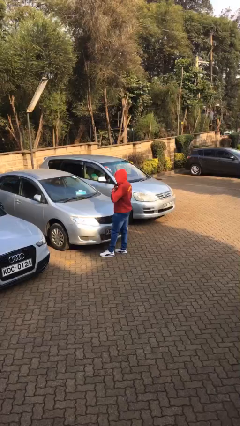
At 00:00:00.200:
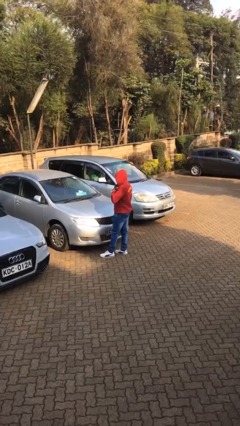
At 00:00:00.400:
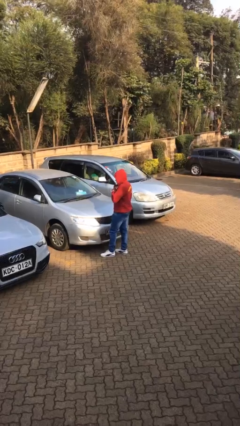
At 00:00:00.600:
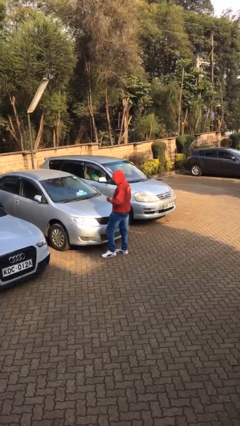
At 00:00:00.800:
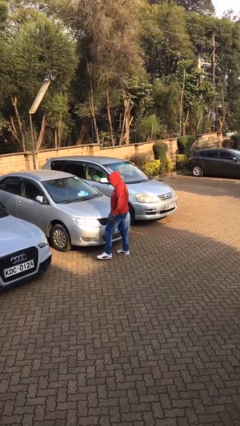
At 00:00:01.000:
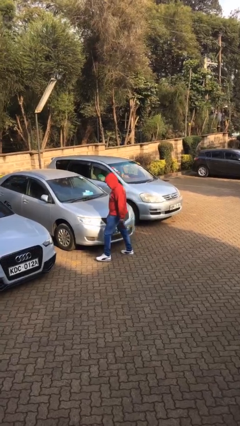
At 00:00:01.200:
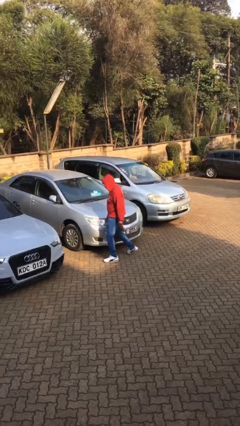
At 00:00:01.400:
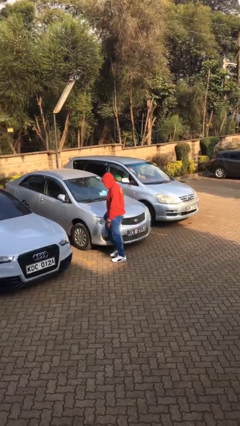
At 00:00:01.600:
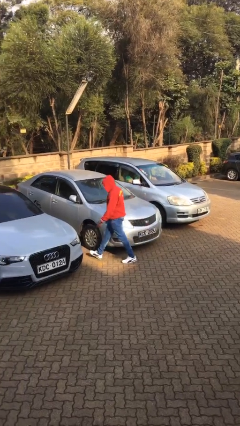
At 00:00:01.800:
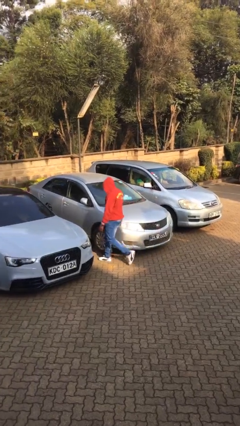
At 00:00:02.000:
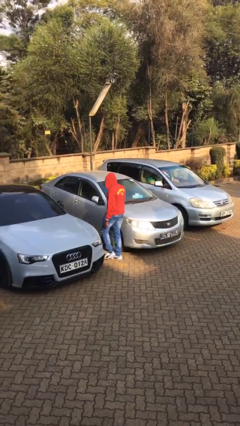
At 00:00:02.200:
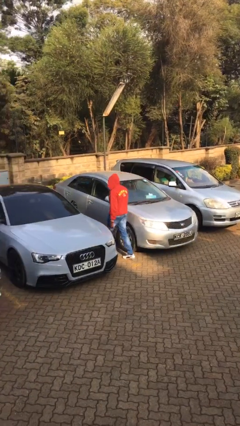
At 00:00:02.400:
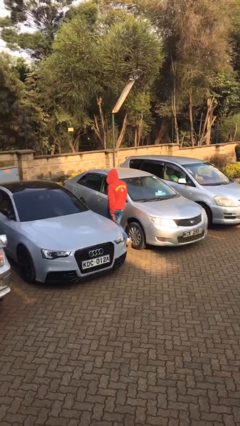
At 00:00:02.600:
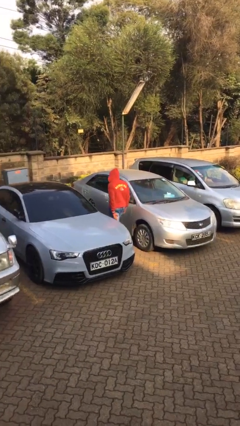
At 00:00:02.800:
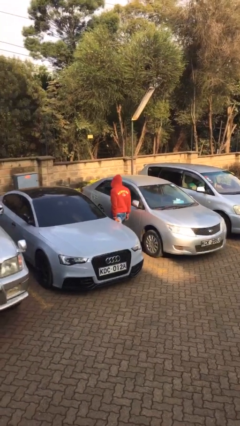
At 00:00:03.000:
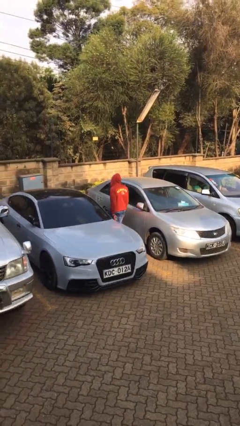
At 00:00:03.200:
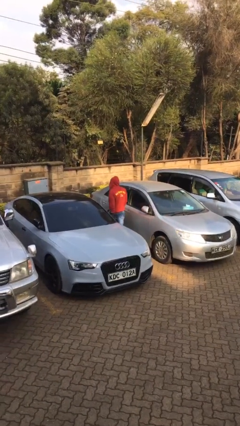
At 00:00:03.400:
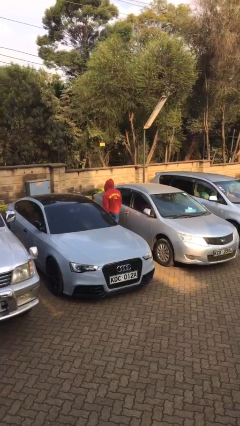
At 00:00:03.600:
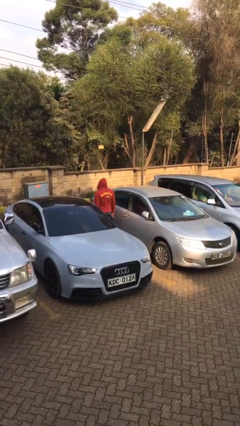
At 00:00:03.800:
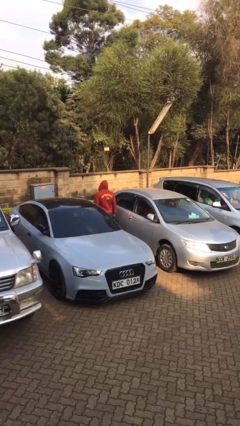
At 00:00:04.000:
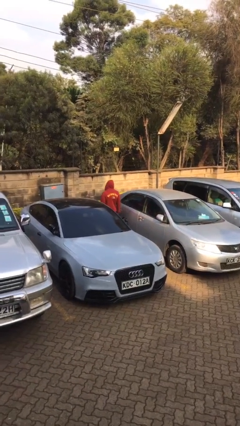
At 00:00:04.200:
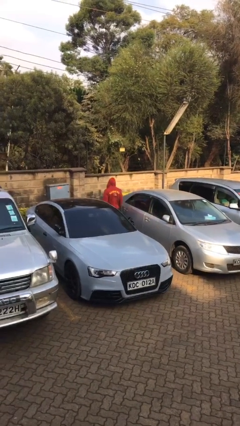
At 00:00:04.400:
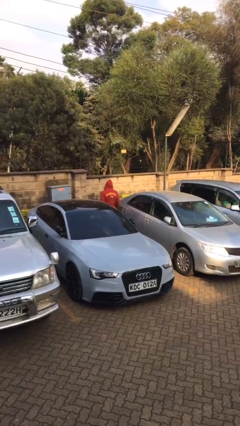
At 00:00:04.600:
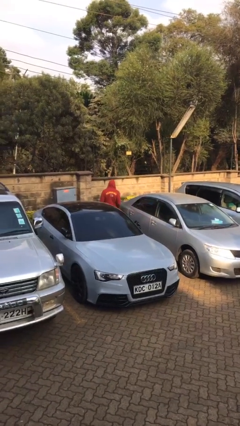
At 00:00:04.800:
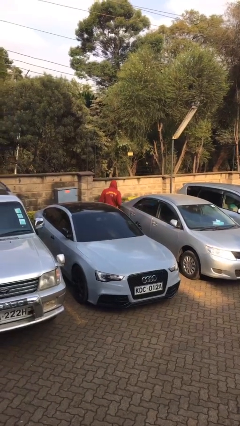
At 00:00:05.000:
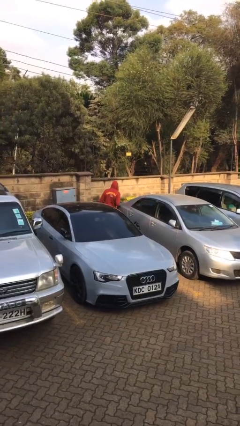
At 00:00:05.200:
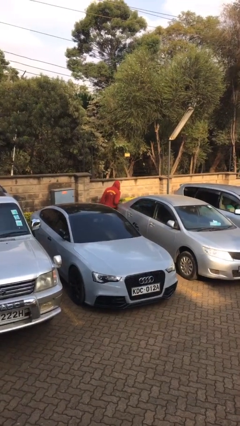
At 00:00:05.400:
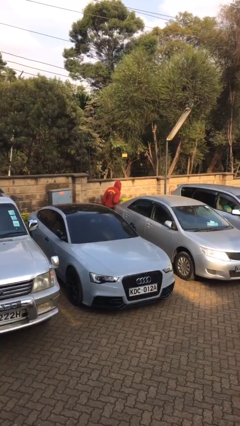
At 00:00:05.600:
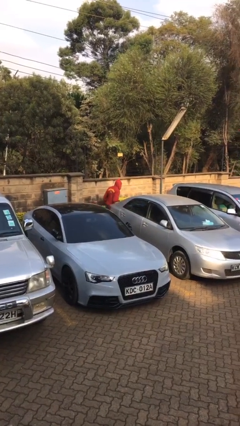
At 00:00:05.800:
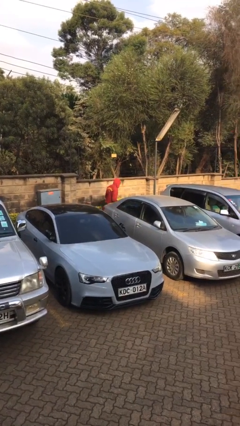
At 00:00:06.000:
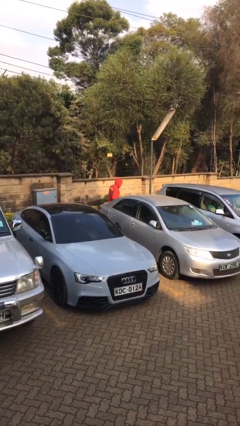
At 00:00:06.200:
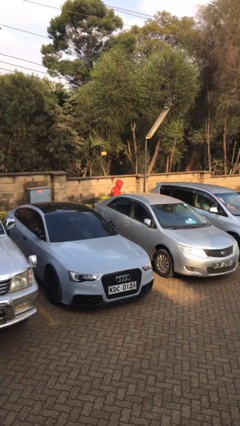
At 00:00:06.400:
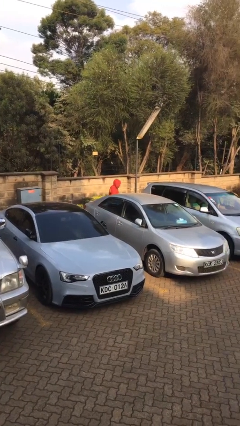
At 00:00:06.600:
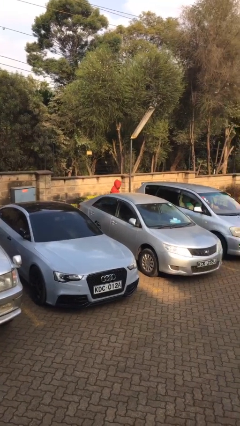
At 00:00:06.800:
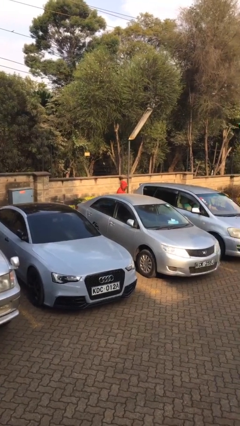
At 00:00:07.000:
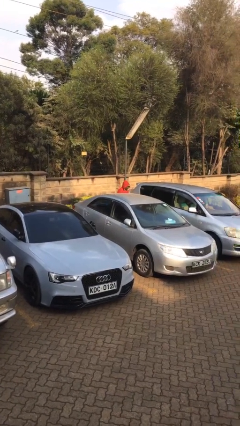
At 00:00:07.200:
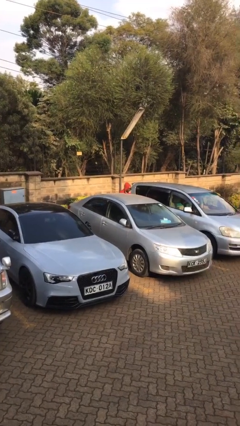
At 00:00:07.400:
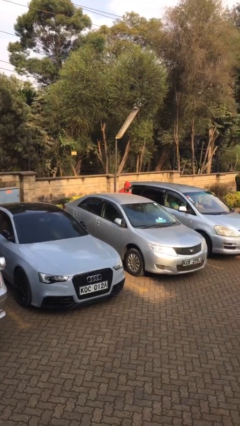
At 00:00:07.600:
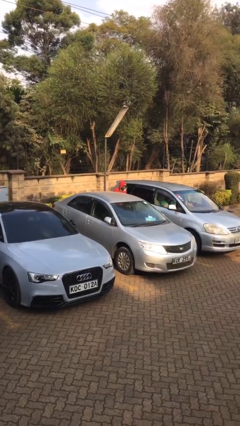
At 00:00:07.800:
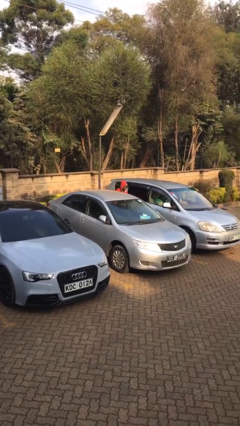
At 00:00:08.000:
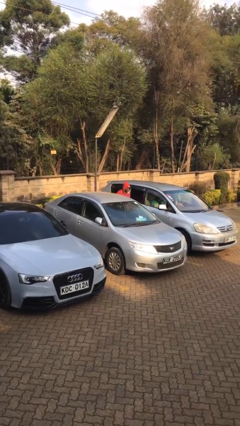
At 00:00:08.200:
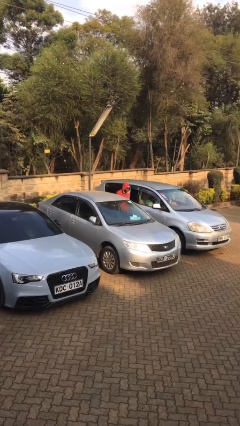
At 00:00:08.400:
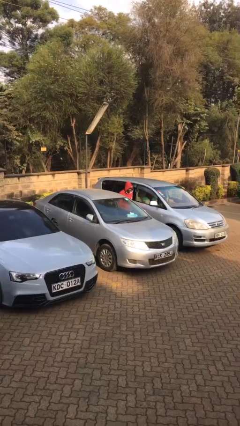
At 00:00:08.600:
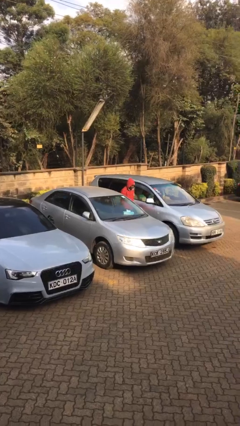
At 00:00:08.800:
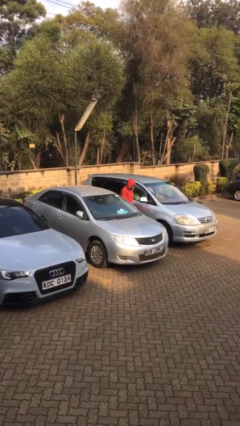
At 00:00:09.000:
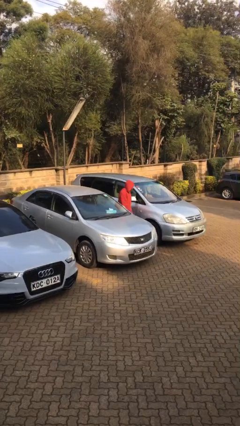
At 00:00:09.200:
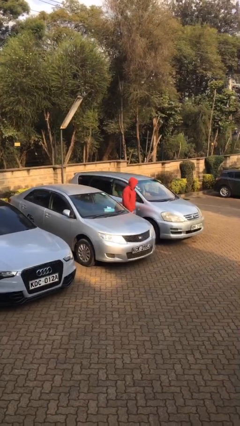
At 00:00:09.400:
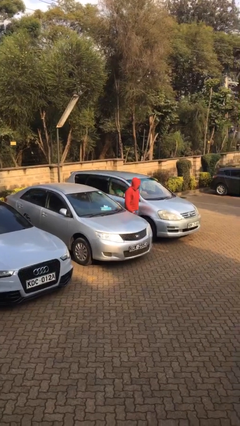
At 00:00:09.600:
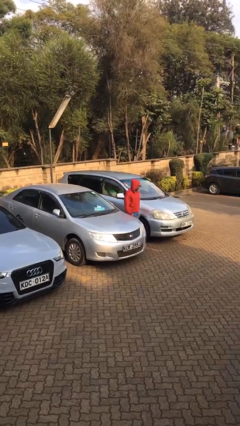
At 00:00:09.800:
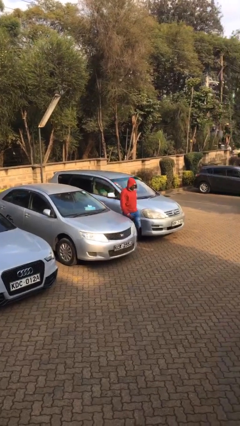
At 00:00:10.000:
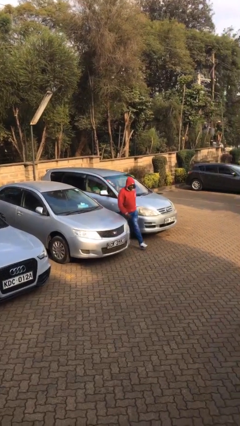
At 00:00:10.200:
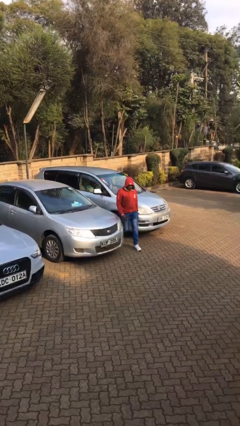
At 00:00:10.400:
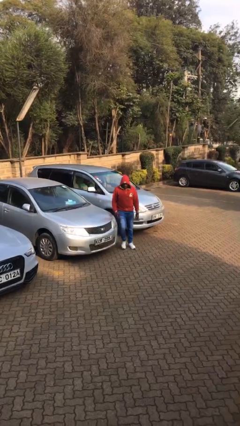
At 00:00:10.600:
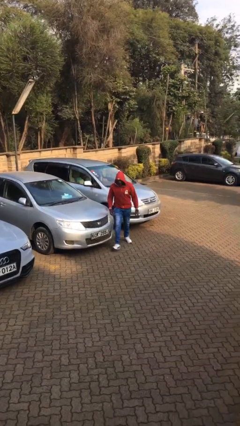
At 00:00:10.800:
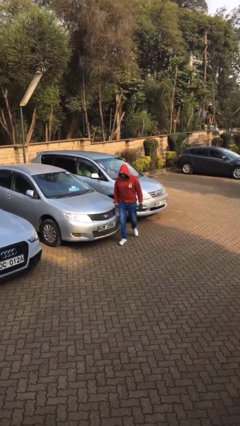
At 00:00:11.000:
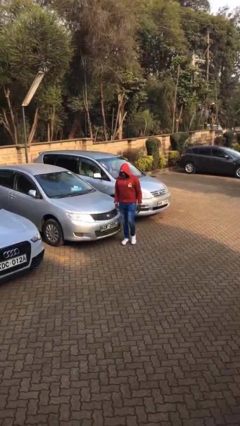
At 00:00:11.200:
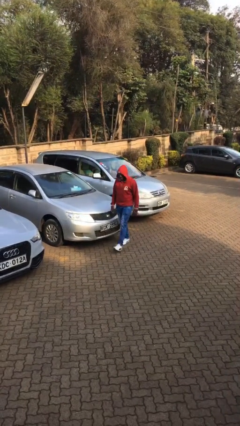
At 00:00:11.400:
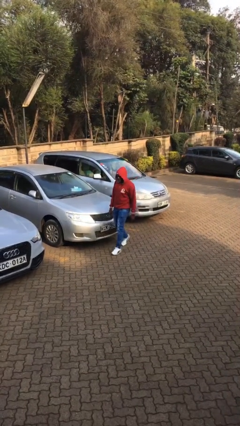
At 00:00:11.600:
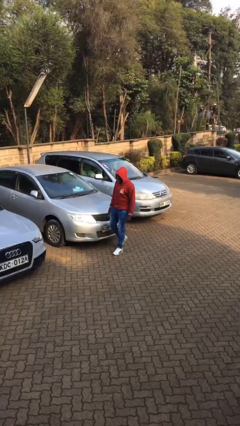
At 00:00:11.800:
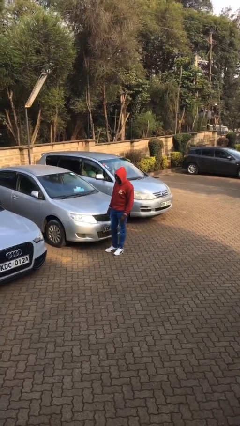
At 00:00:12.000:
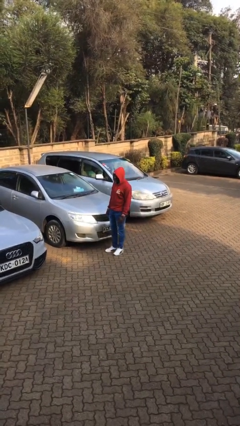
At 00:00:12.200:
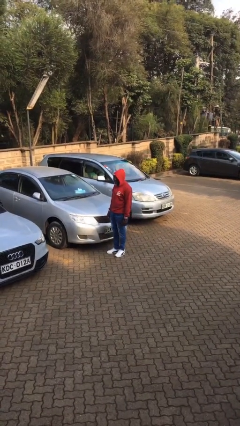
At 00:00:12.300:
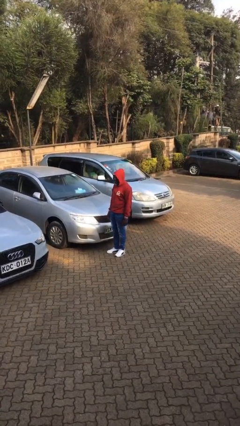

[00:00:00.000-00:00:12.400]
person walks around car

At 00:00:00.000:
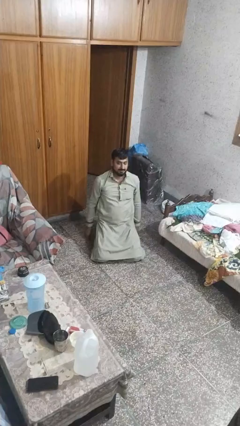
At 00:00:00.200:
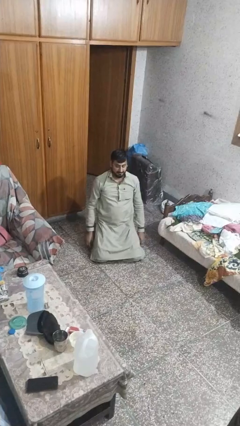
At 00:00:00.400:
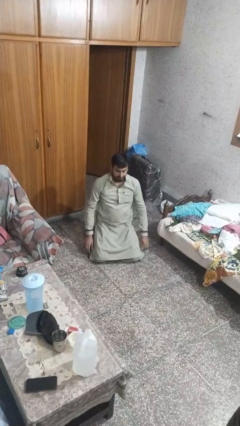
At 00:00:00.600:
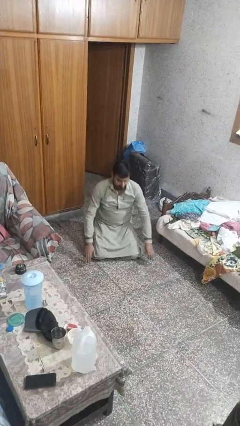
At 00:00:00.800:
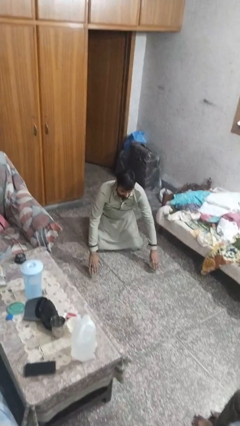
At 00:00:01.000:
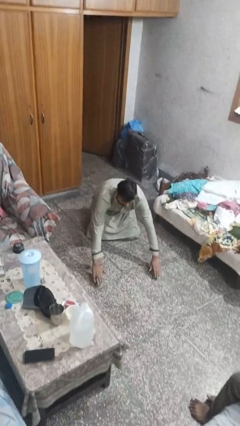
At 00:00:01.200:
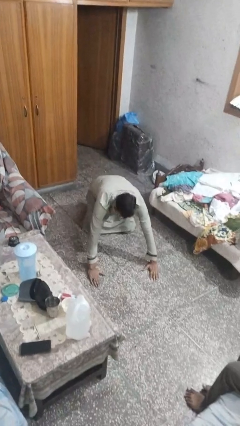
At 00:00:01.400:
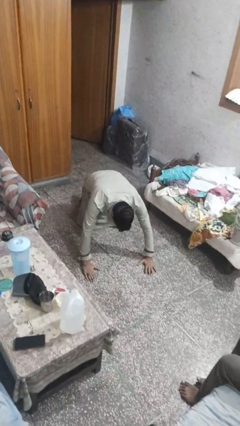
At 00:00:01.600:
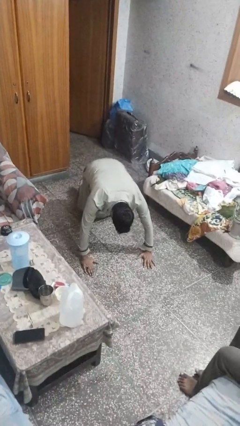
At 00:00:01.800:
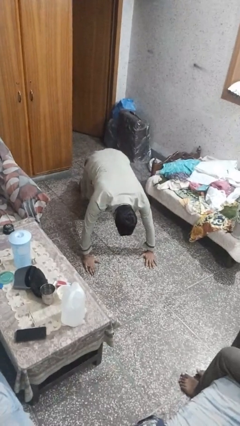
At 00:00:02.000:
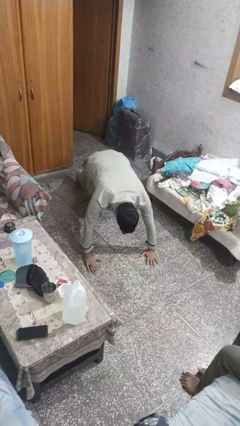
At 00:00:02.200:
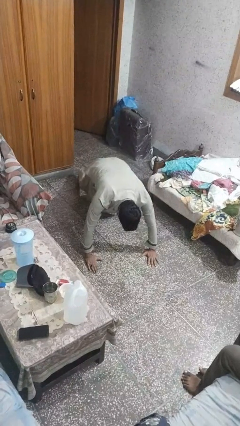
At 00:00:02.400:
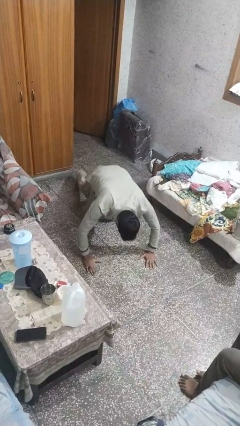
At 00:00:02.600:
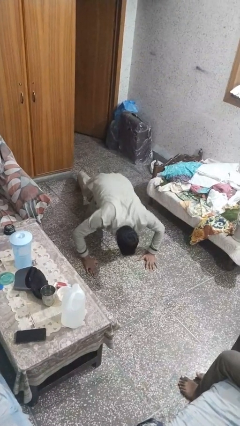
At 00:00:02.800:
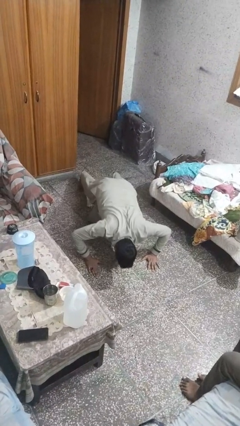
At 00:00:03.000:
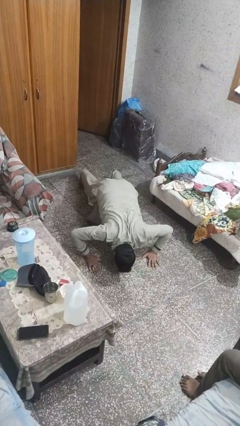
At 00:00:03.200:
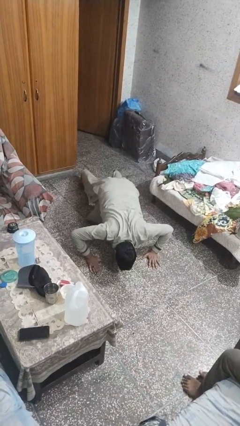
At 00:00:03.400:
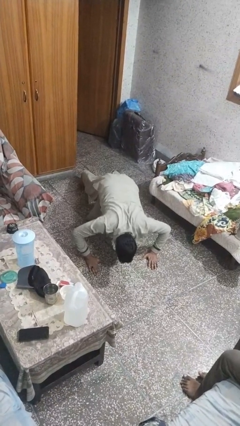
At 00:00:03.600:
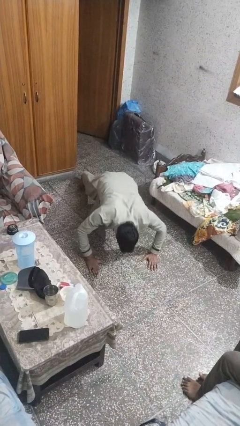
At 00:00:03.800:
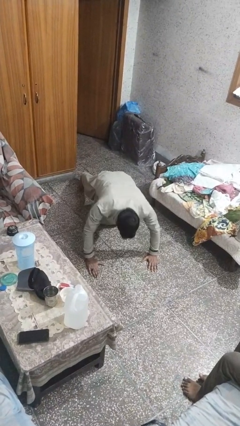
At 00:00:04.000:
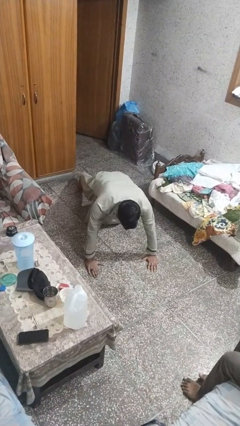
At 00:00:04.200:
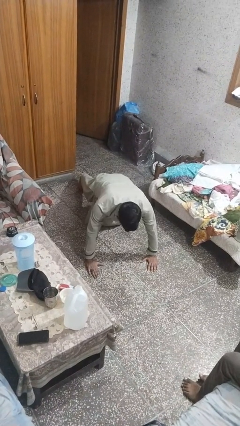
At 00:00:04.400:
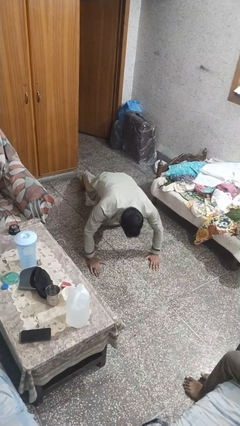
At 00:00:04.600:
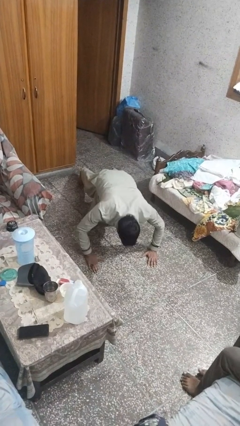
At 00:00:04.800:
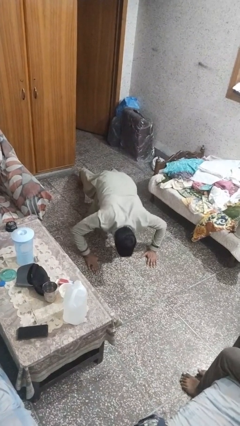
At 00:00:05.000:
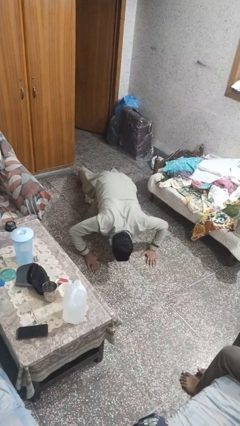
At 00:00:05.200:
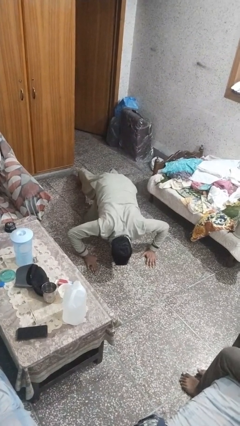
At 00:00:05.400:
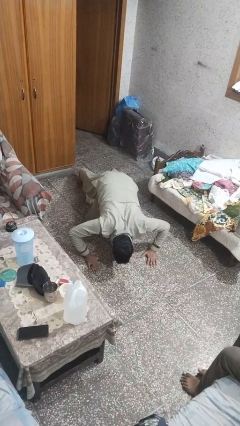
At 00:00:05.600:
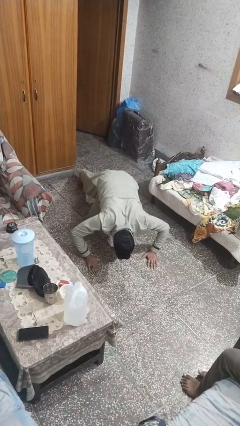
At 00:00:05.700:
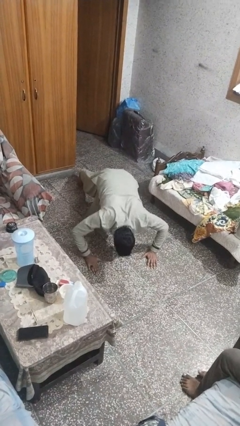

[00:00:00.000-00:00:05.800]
person exercises with pushup
